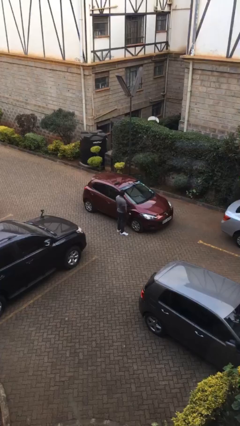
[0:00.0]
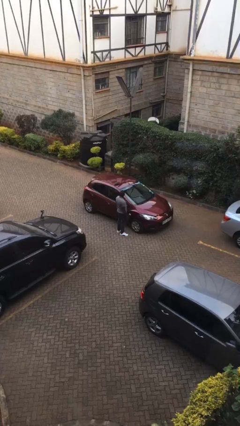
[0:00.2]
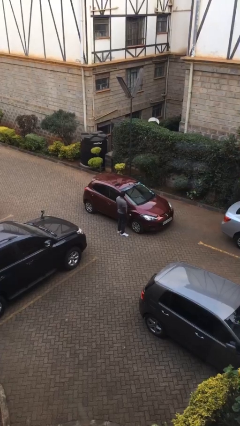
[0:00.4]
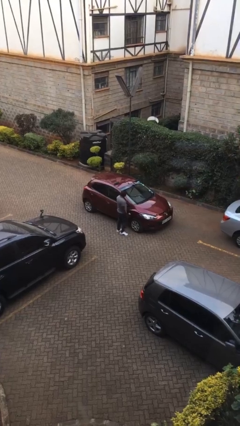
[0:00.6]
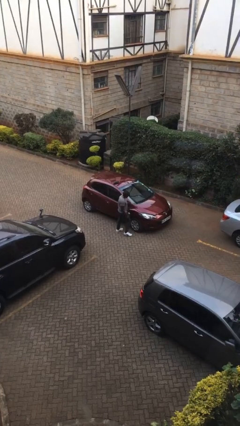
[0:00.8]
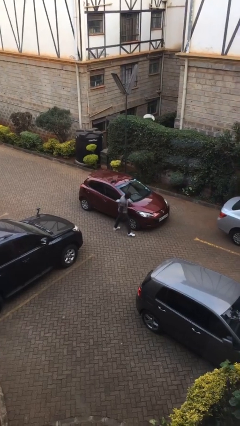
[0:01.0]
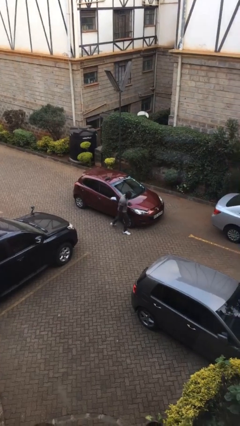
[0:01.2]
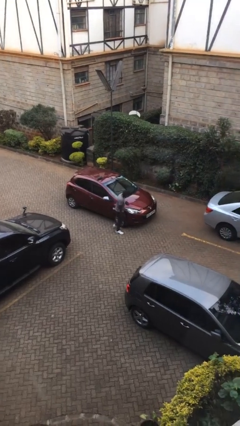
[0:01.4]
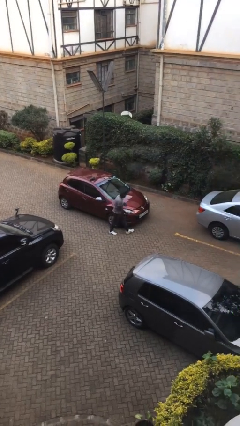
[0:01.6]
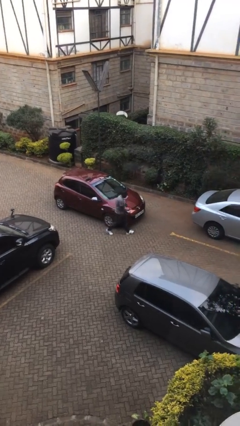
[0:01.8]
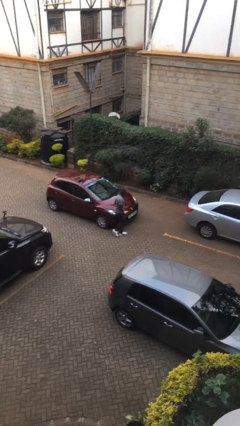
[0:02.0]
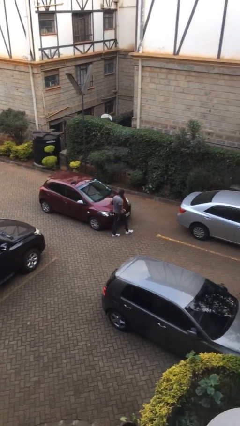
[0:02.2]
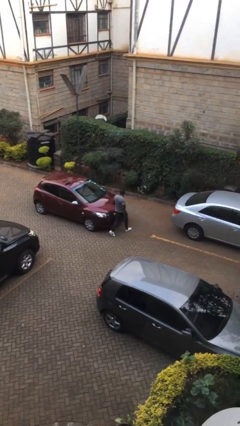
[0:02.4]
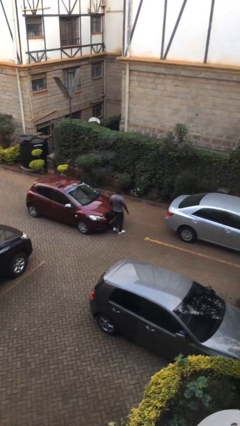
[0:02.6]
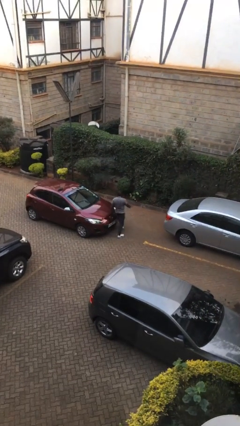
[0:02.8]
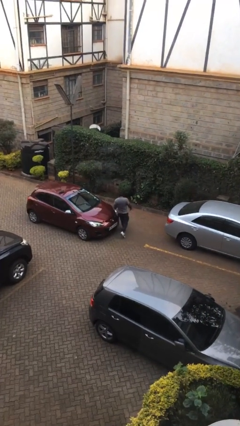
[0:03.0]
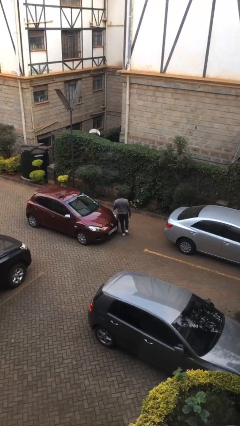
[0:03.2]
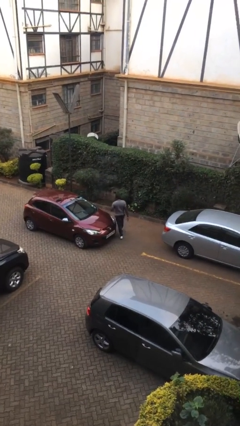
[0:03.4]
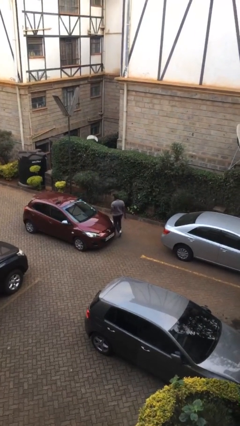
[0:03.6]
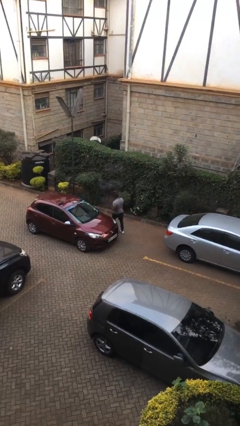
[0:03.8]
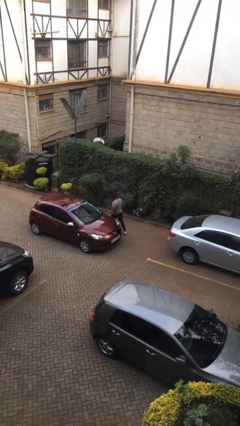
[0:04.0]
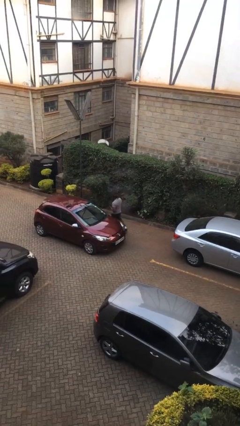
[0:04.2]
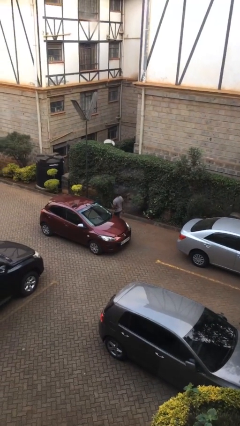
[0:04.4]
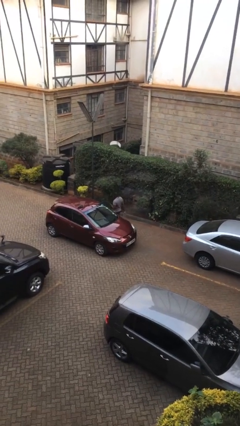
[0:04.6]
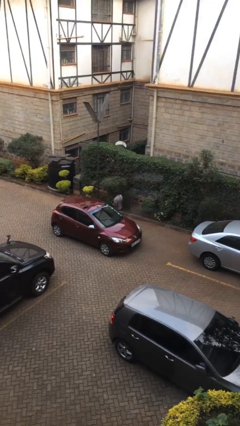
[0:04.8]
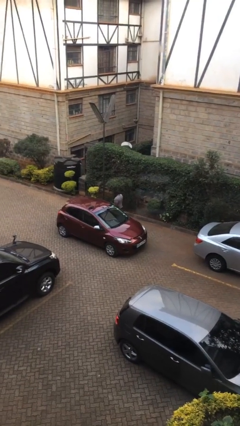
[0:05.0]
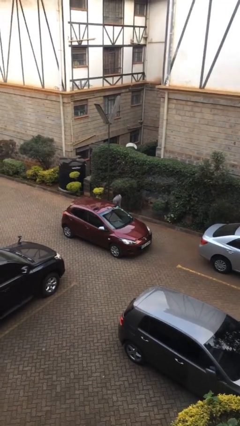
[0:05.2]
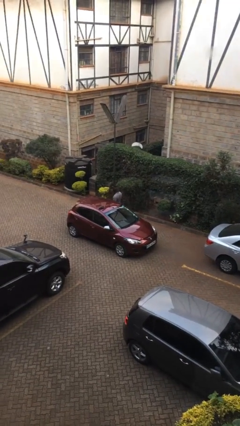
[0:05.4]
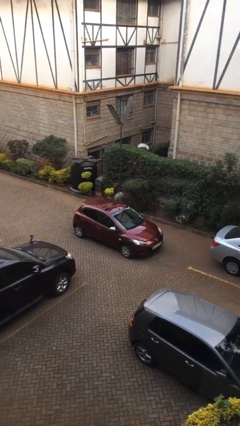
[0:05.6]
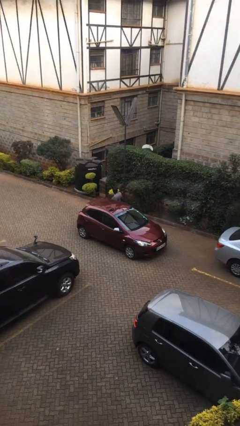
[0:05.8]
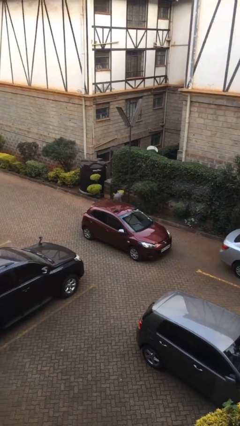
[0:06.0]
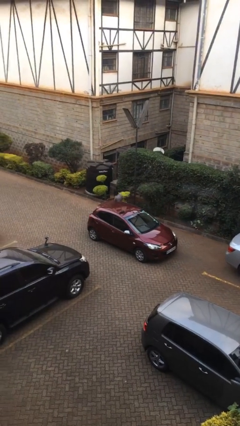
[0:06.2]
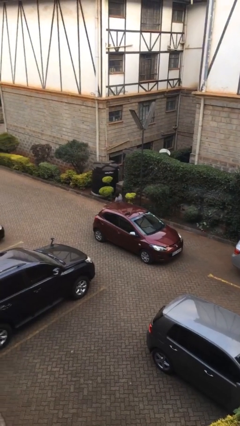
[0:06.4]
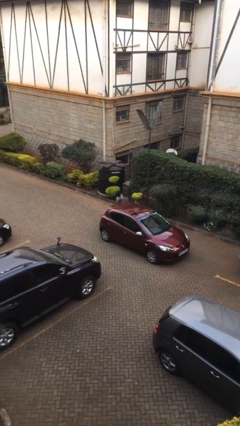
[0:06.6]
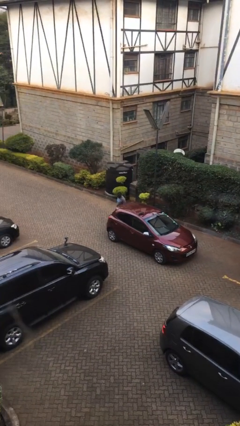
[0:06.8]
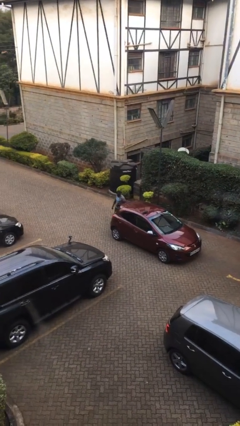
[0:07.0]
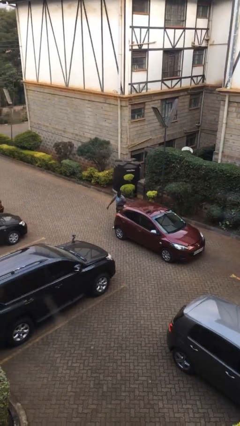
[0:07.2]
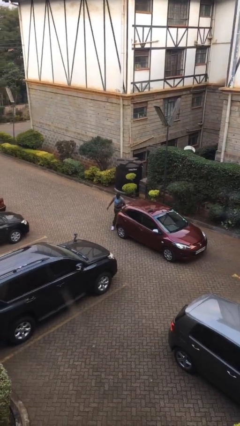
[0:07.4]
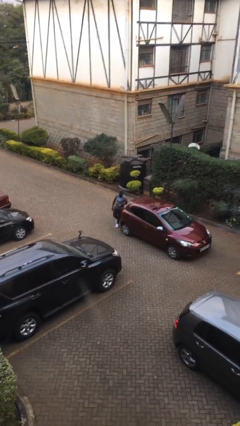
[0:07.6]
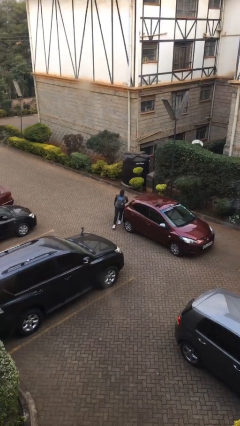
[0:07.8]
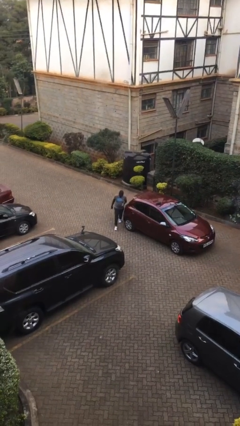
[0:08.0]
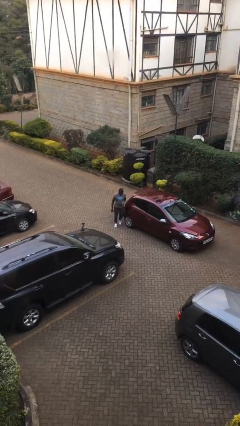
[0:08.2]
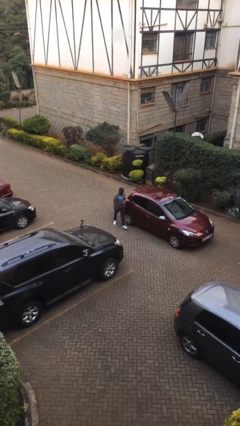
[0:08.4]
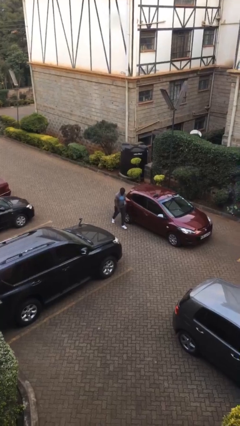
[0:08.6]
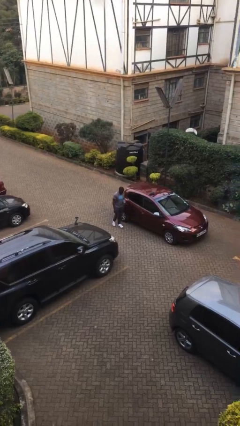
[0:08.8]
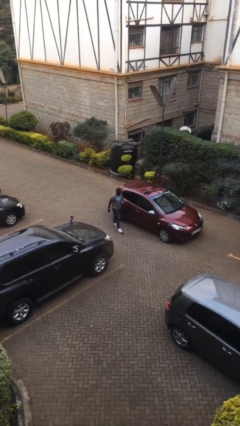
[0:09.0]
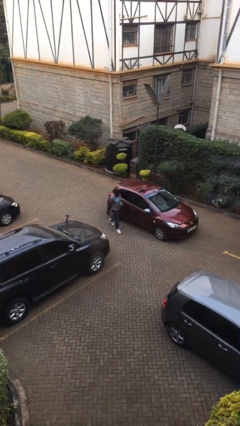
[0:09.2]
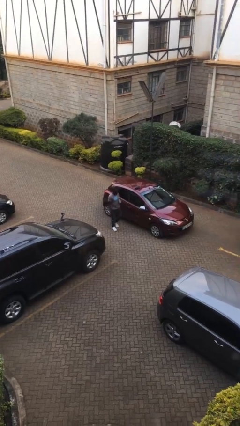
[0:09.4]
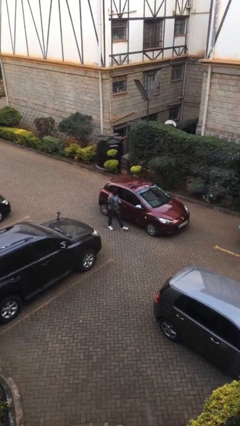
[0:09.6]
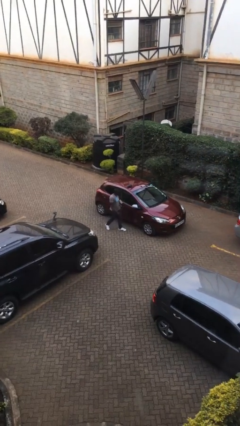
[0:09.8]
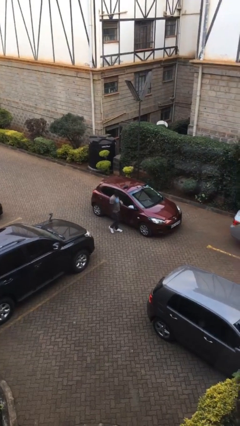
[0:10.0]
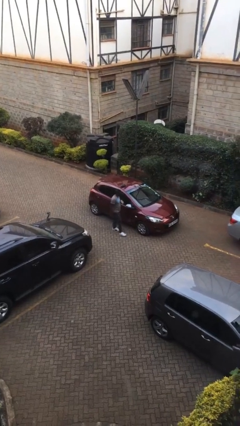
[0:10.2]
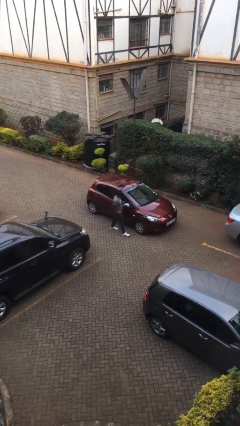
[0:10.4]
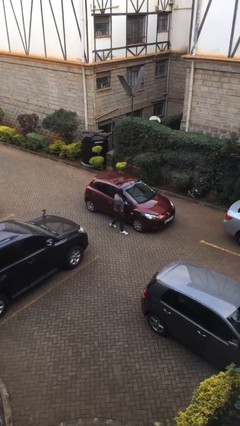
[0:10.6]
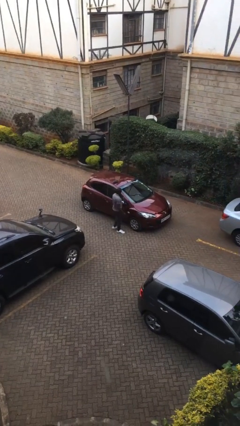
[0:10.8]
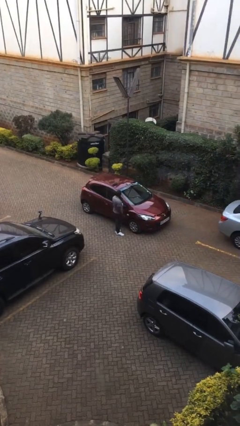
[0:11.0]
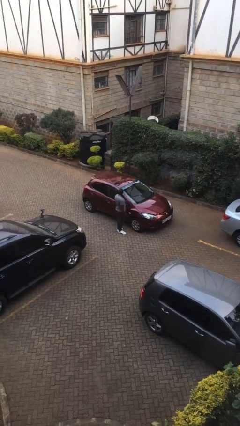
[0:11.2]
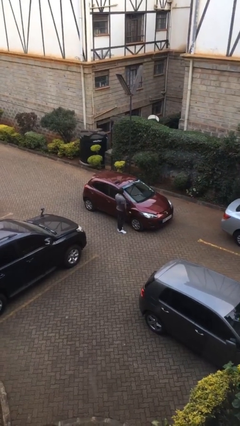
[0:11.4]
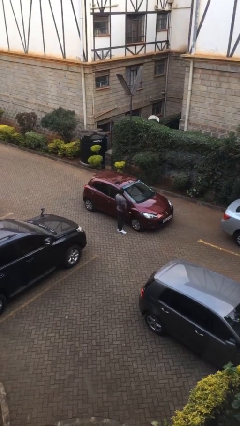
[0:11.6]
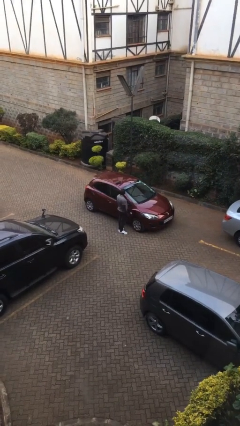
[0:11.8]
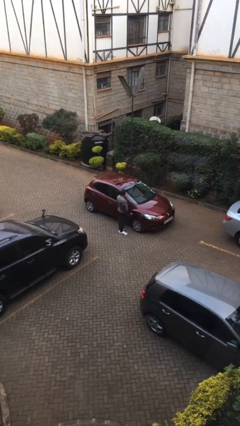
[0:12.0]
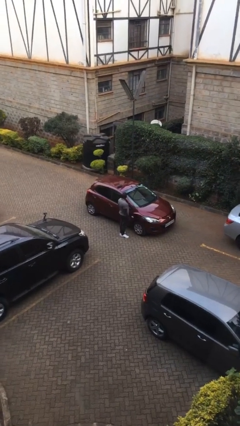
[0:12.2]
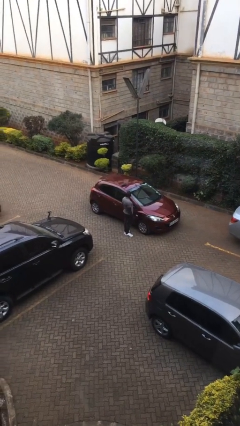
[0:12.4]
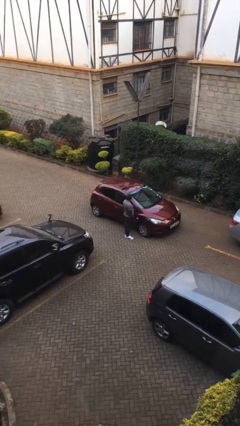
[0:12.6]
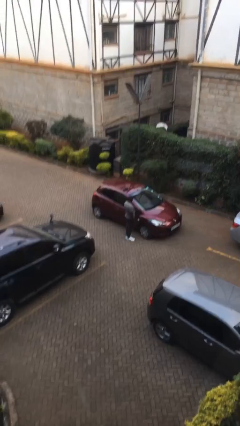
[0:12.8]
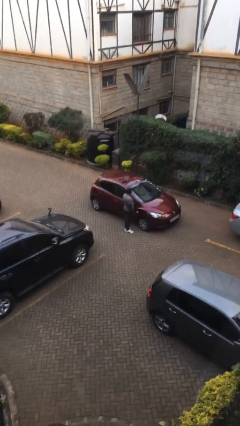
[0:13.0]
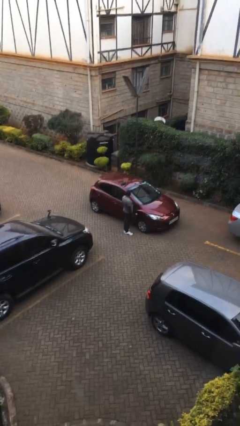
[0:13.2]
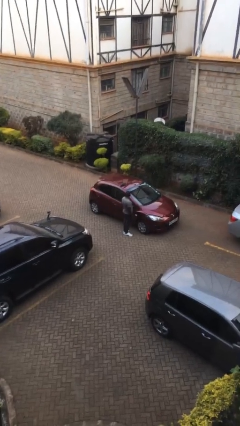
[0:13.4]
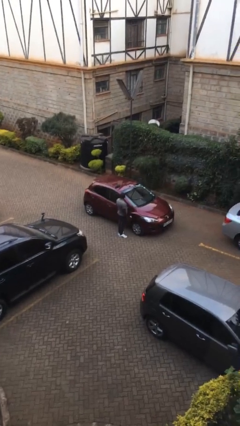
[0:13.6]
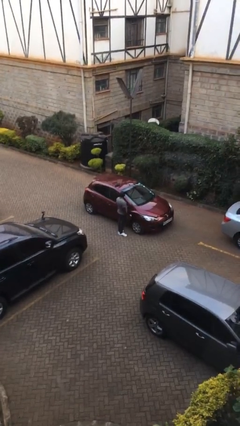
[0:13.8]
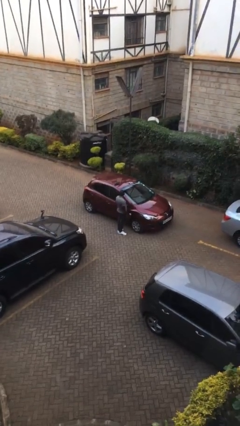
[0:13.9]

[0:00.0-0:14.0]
person walks around car

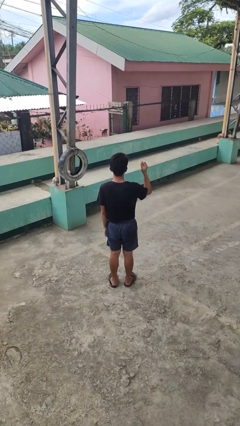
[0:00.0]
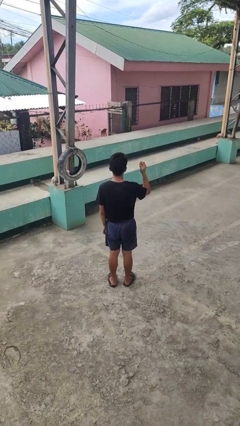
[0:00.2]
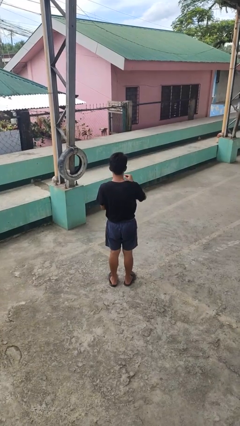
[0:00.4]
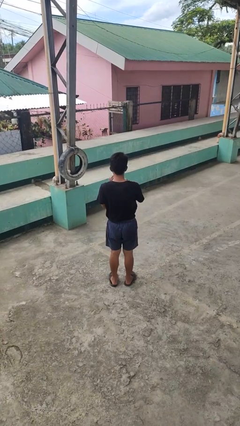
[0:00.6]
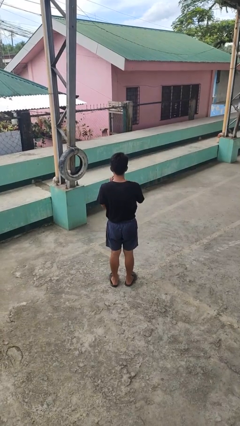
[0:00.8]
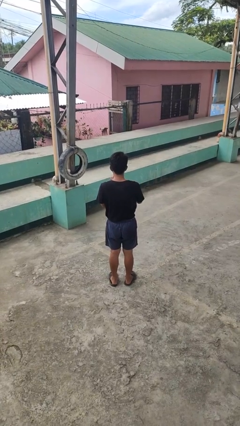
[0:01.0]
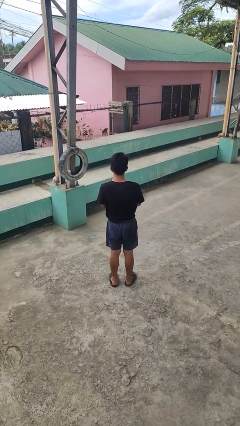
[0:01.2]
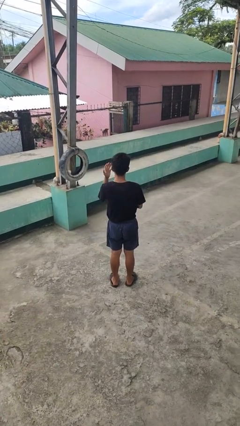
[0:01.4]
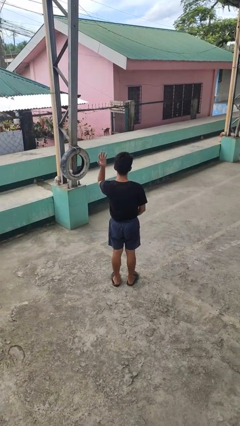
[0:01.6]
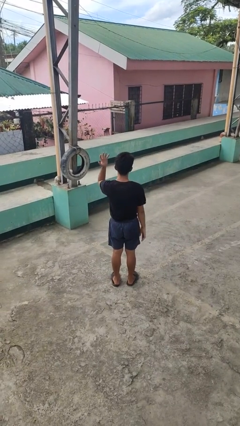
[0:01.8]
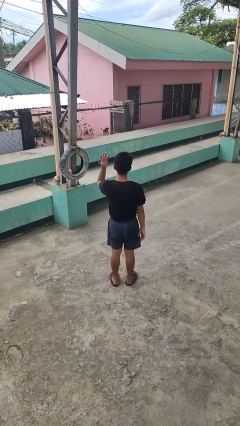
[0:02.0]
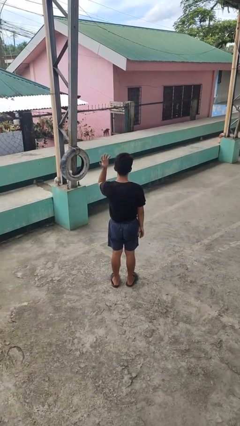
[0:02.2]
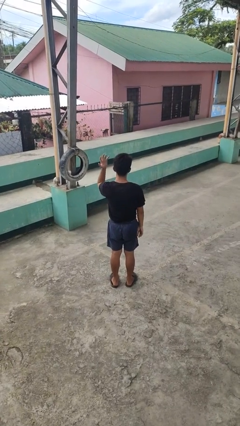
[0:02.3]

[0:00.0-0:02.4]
person puts on ring

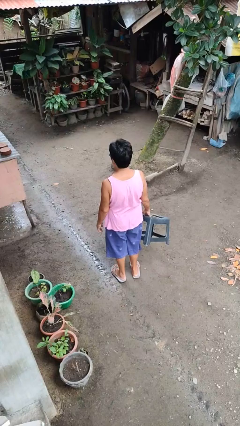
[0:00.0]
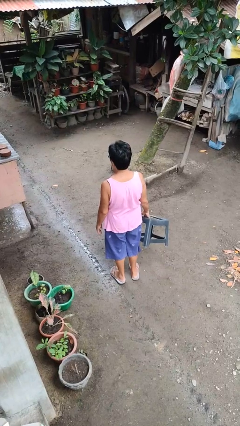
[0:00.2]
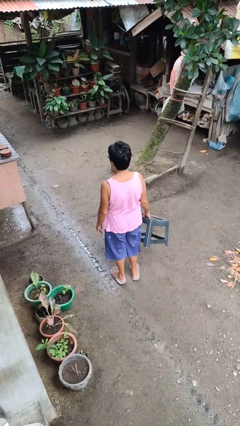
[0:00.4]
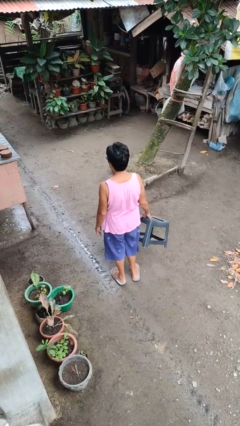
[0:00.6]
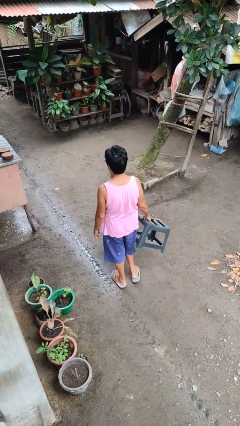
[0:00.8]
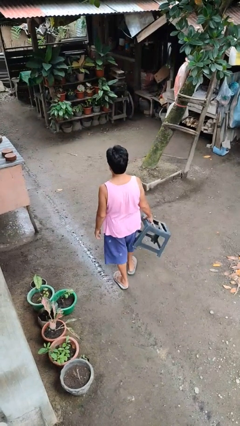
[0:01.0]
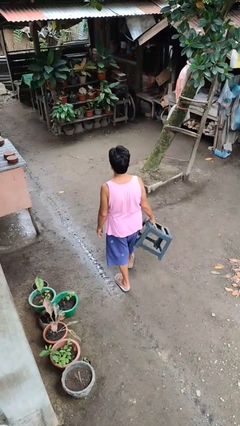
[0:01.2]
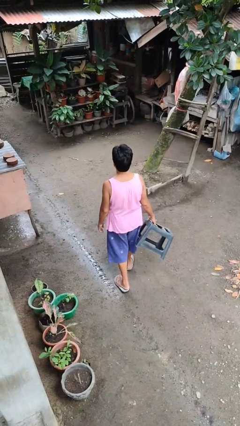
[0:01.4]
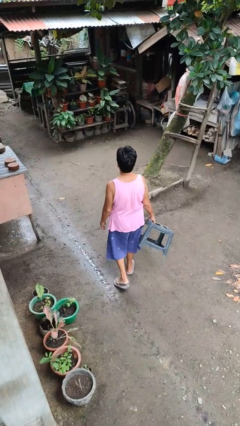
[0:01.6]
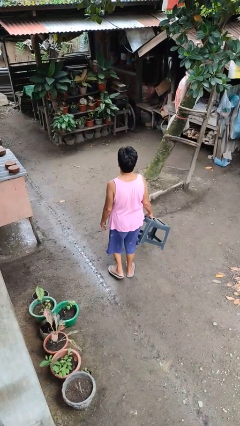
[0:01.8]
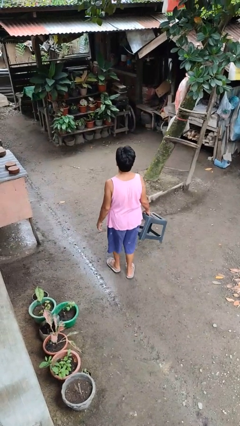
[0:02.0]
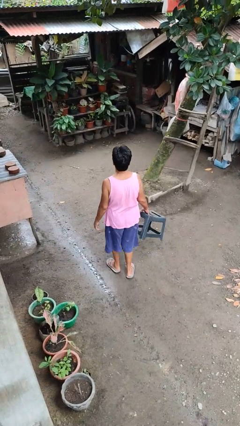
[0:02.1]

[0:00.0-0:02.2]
person carries furniture
